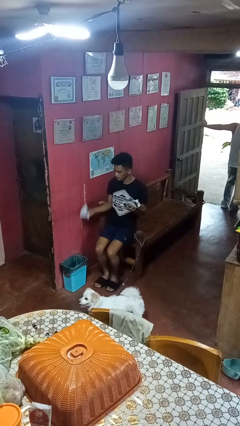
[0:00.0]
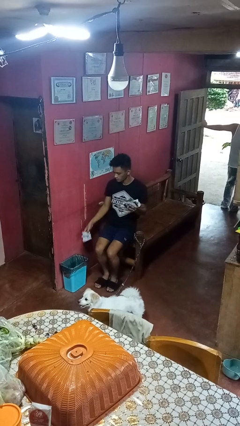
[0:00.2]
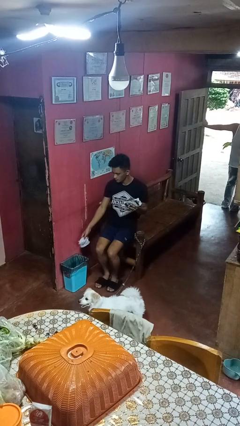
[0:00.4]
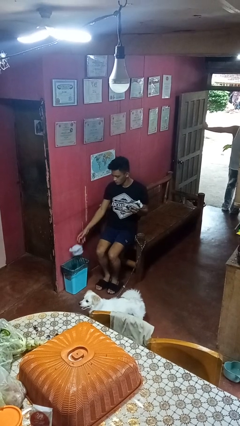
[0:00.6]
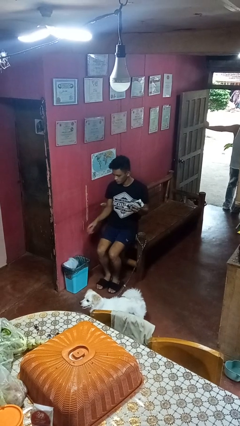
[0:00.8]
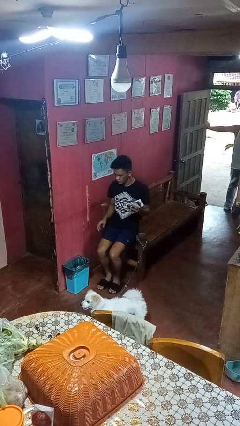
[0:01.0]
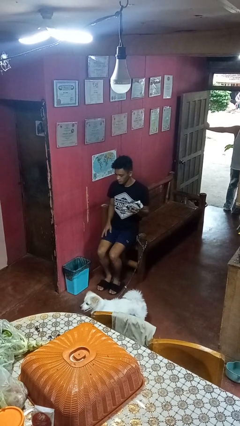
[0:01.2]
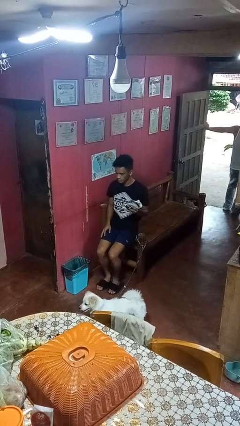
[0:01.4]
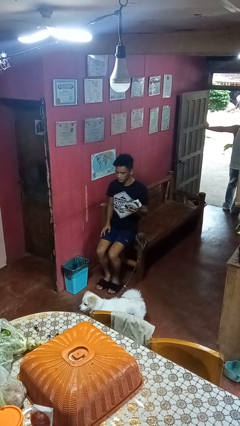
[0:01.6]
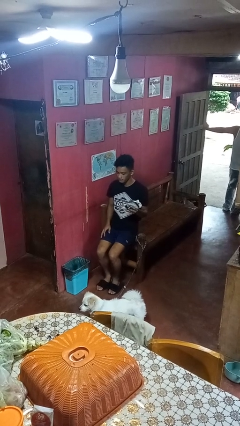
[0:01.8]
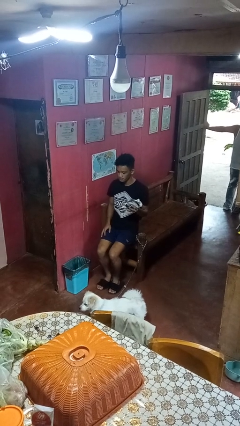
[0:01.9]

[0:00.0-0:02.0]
person discards trash

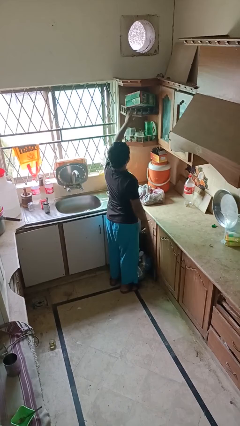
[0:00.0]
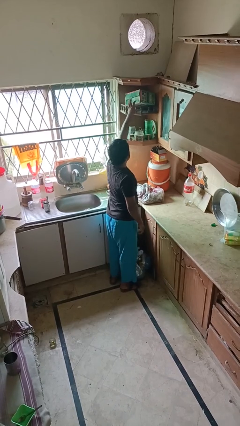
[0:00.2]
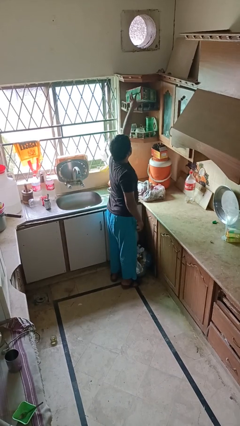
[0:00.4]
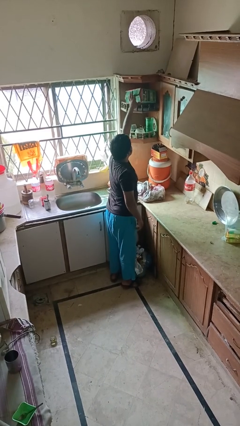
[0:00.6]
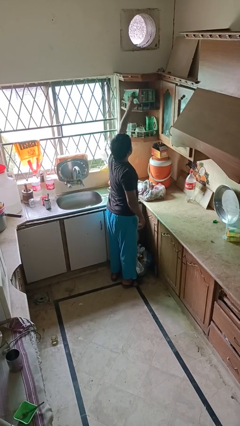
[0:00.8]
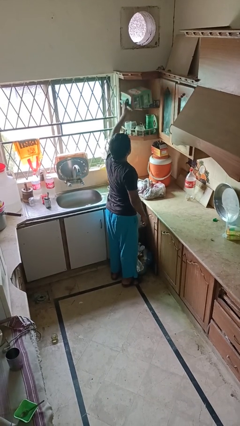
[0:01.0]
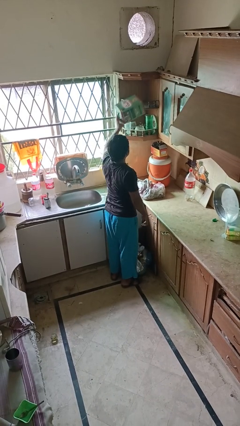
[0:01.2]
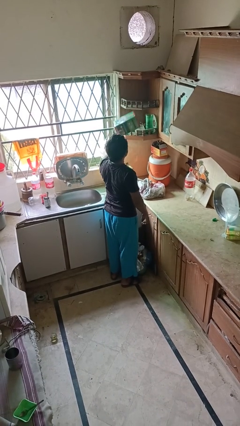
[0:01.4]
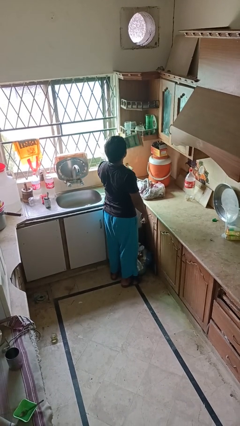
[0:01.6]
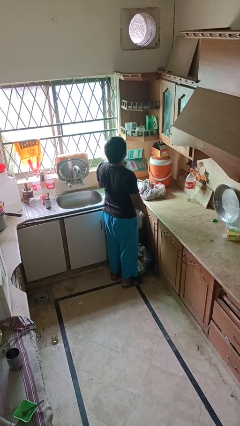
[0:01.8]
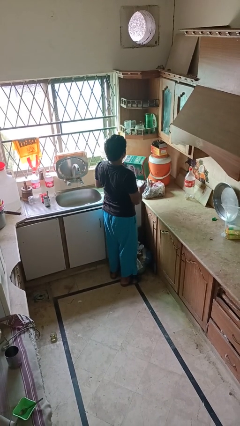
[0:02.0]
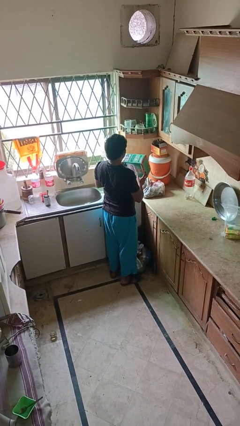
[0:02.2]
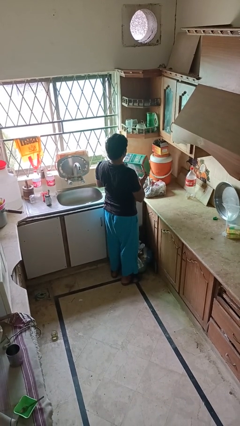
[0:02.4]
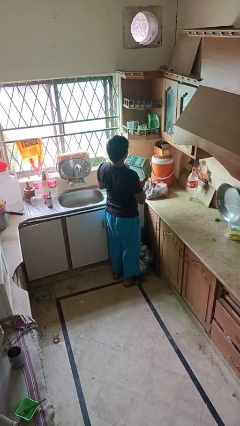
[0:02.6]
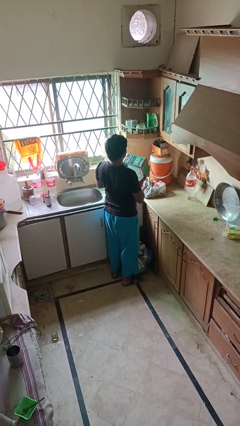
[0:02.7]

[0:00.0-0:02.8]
person picks up object from shelf

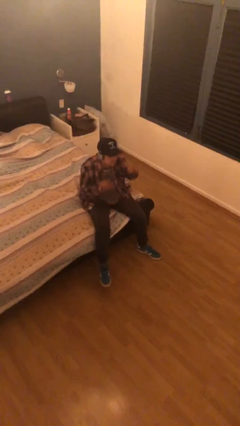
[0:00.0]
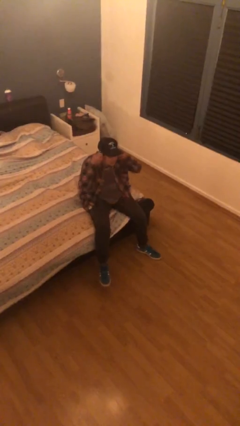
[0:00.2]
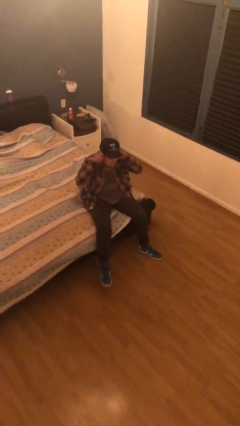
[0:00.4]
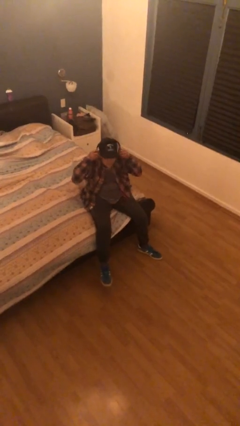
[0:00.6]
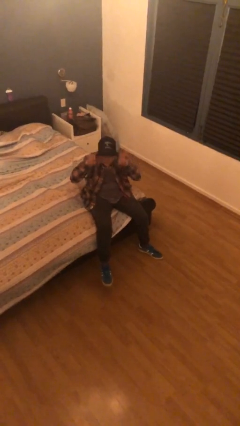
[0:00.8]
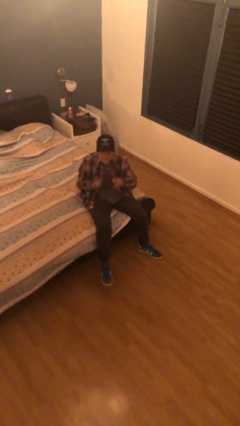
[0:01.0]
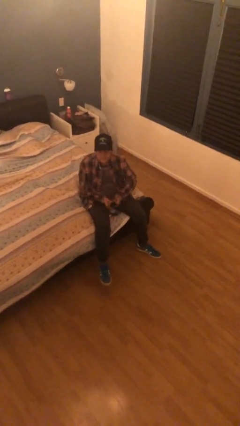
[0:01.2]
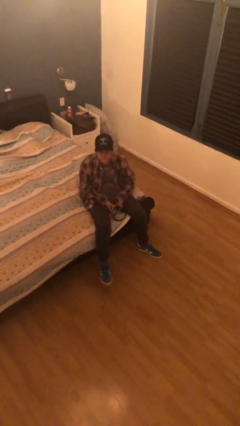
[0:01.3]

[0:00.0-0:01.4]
person takes off headphones

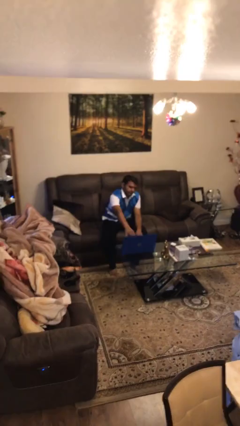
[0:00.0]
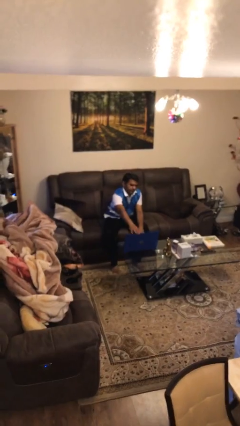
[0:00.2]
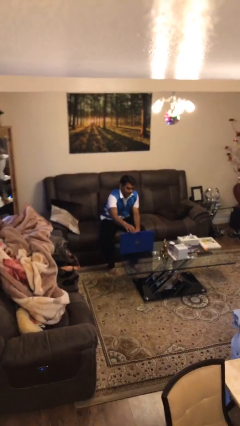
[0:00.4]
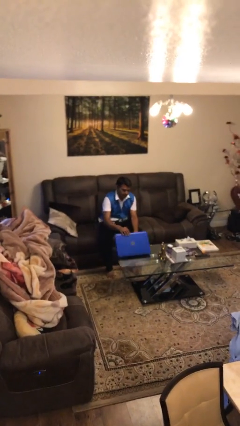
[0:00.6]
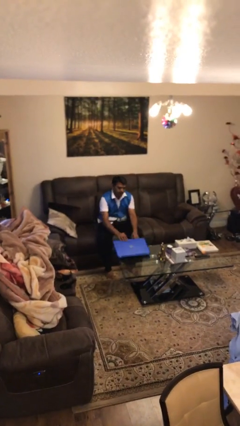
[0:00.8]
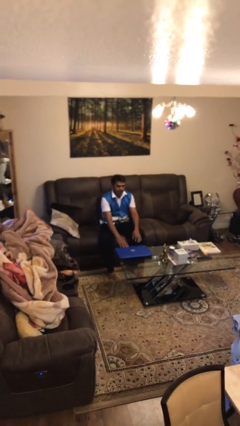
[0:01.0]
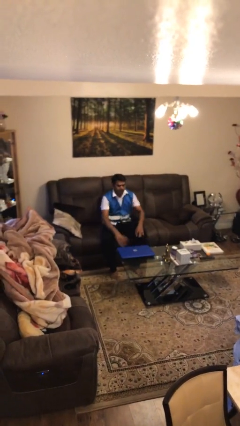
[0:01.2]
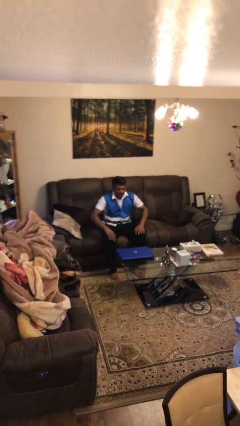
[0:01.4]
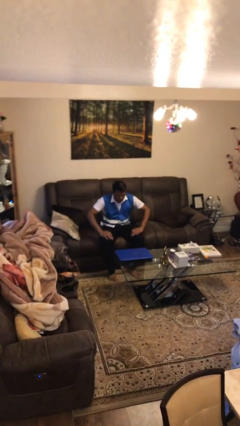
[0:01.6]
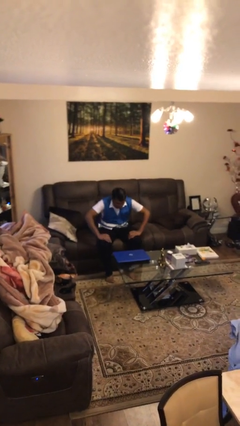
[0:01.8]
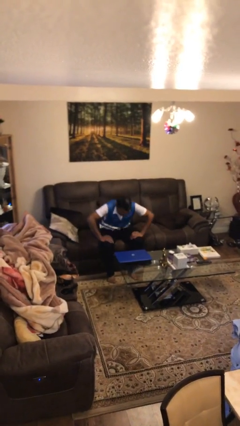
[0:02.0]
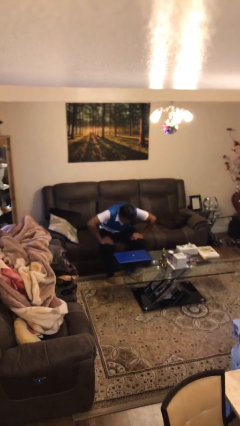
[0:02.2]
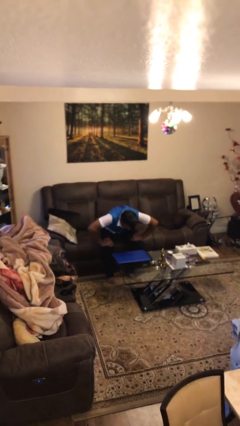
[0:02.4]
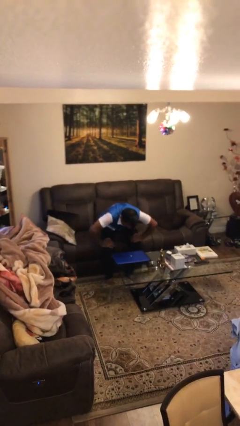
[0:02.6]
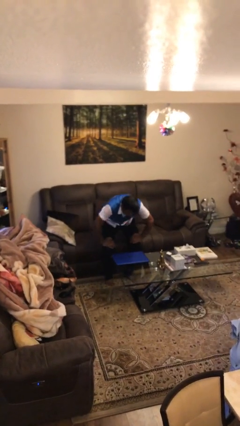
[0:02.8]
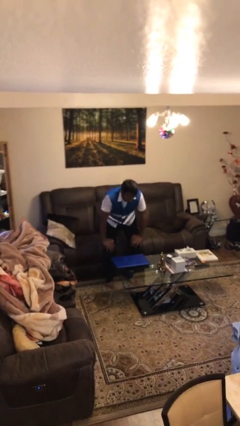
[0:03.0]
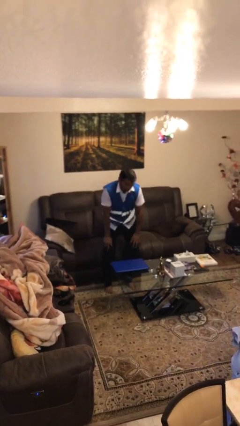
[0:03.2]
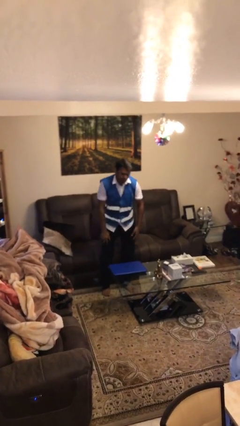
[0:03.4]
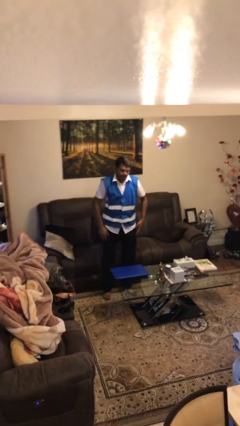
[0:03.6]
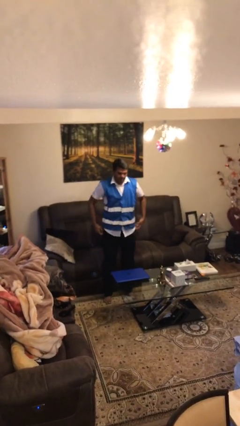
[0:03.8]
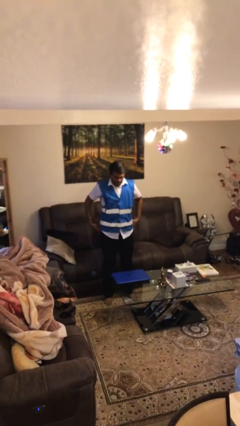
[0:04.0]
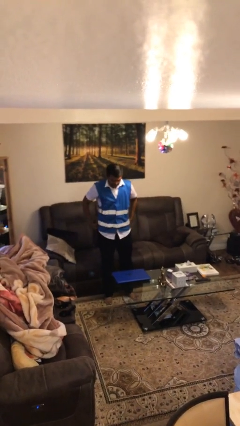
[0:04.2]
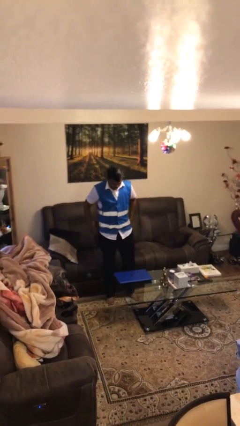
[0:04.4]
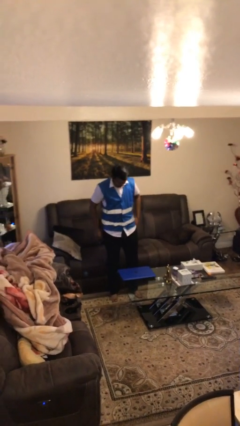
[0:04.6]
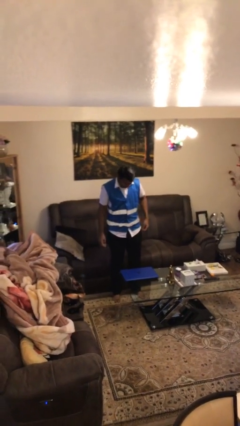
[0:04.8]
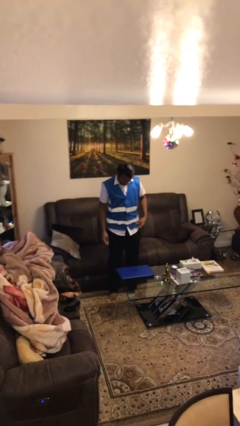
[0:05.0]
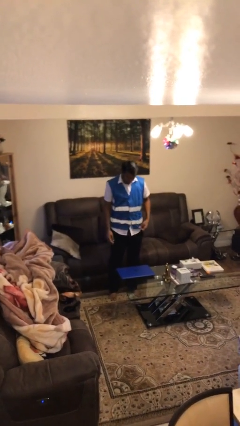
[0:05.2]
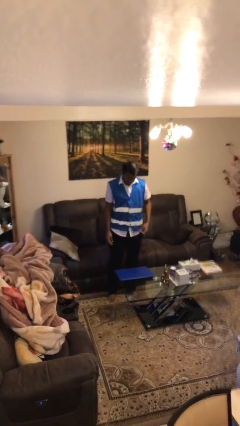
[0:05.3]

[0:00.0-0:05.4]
person stands up

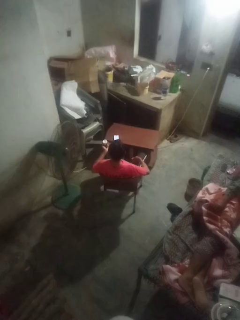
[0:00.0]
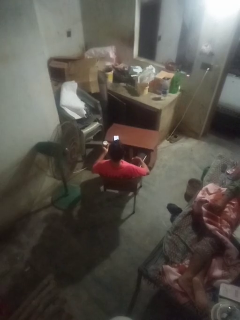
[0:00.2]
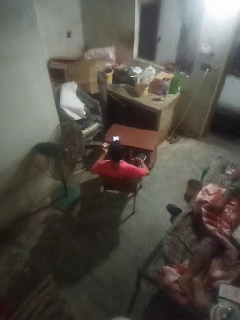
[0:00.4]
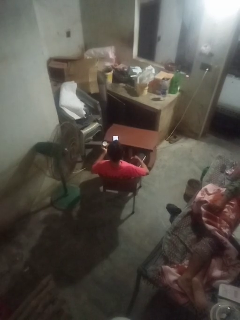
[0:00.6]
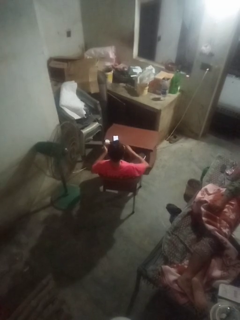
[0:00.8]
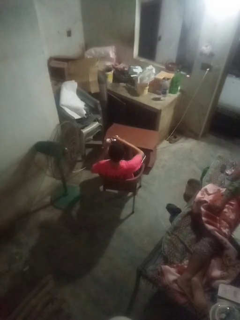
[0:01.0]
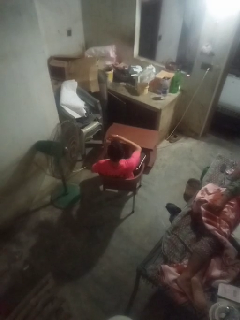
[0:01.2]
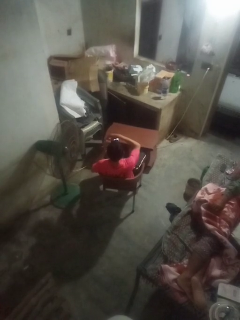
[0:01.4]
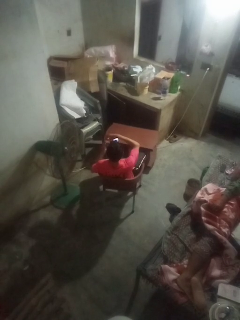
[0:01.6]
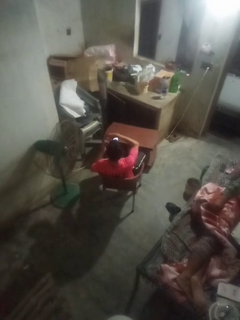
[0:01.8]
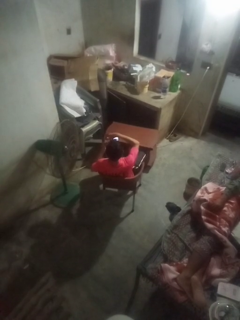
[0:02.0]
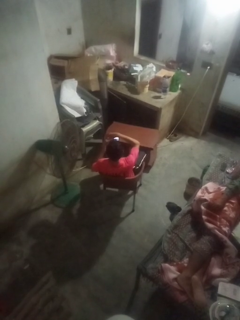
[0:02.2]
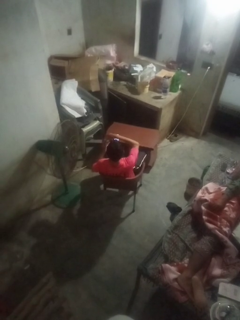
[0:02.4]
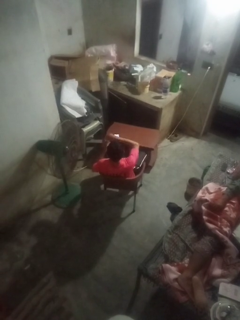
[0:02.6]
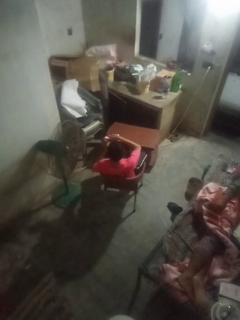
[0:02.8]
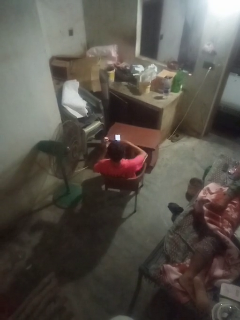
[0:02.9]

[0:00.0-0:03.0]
person closes jar

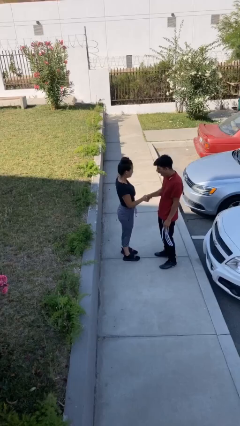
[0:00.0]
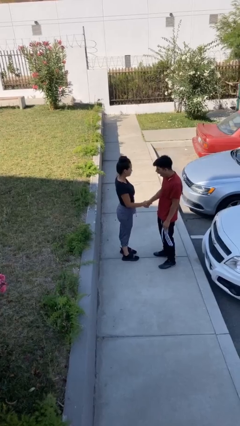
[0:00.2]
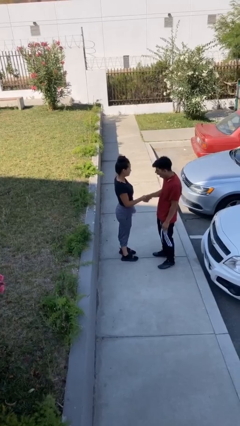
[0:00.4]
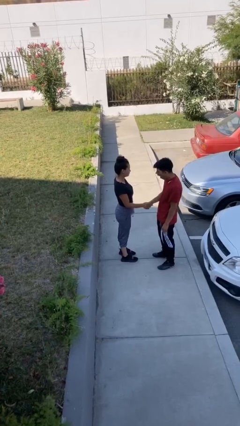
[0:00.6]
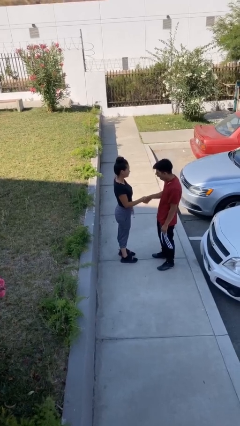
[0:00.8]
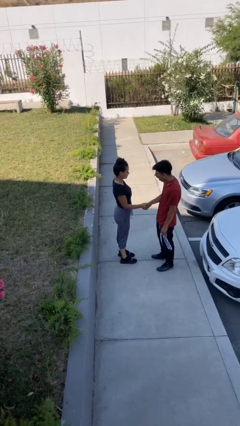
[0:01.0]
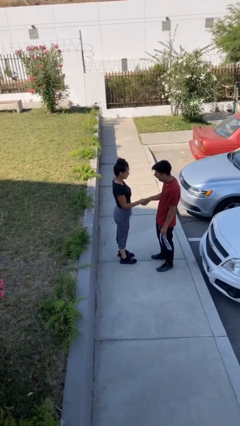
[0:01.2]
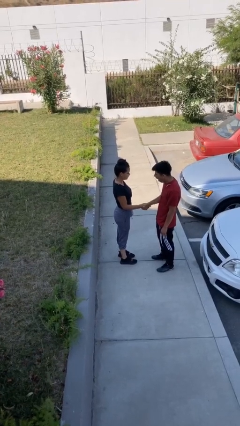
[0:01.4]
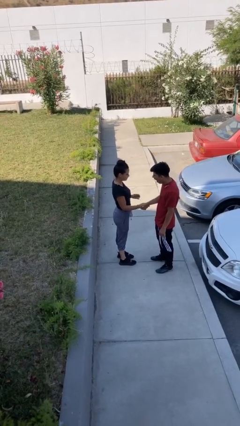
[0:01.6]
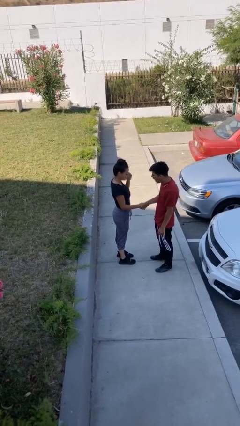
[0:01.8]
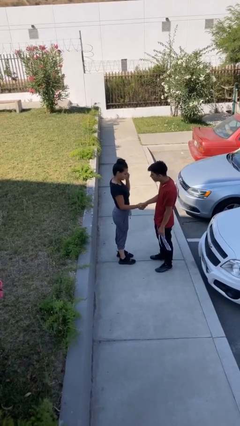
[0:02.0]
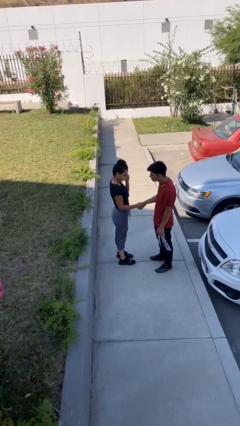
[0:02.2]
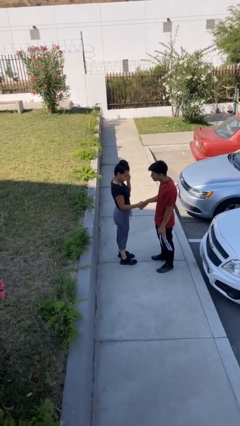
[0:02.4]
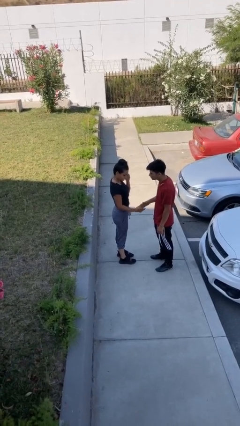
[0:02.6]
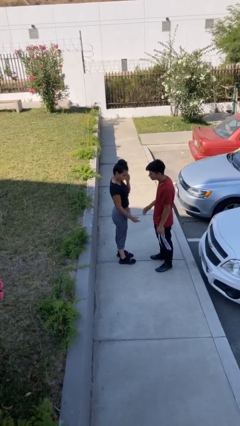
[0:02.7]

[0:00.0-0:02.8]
person shakes hand

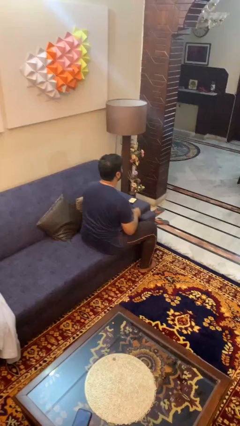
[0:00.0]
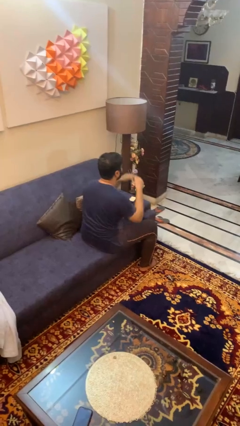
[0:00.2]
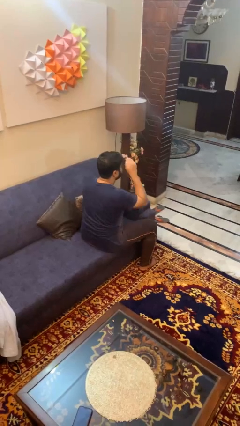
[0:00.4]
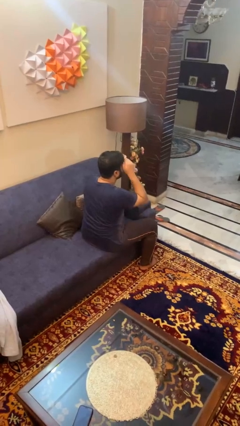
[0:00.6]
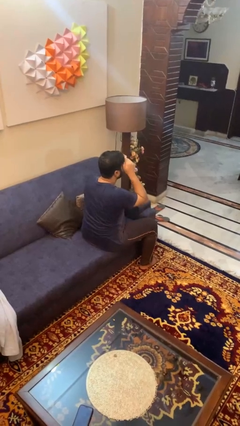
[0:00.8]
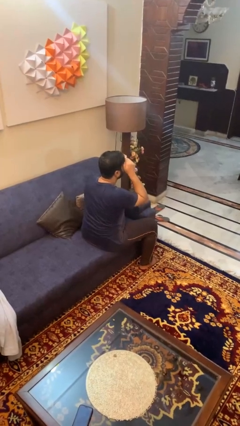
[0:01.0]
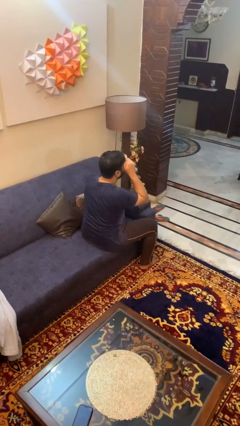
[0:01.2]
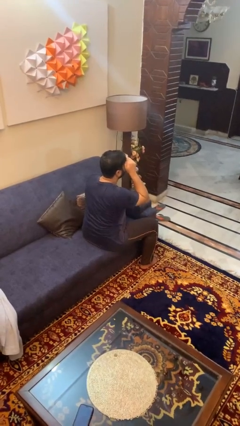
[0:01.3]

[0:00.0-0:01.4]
person shades eyes
